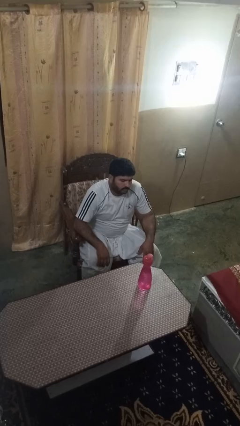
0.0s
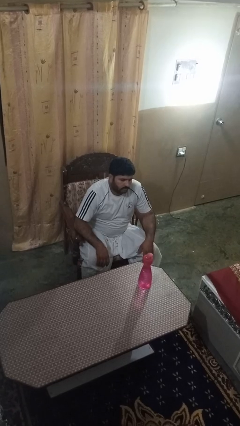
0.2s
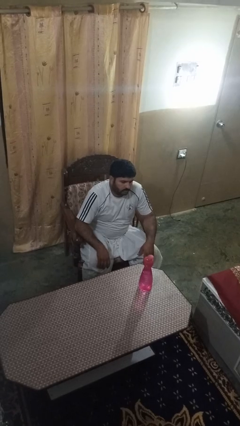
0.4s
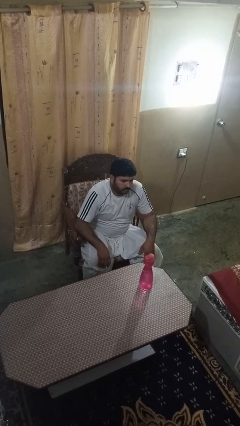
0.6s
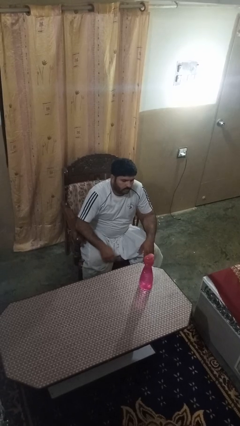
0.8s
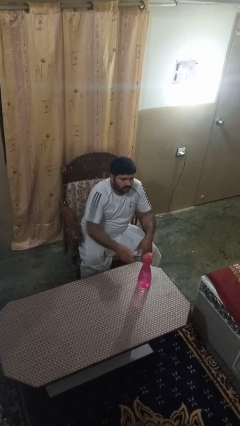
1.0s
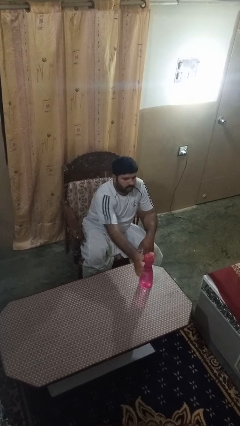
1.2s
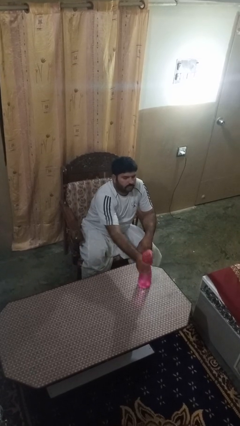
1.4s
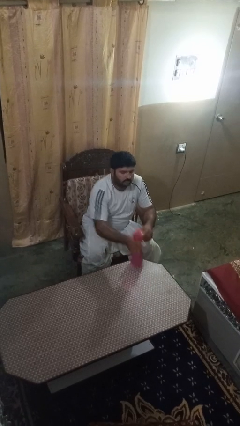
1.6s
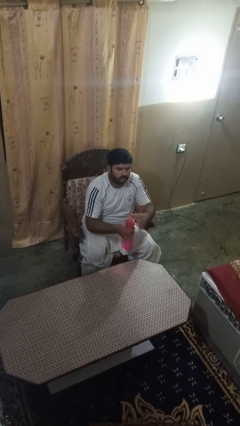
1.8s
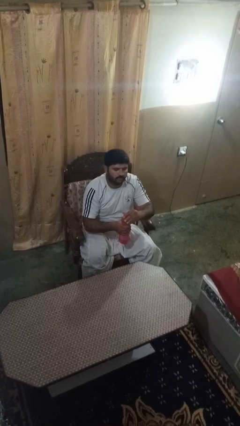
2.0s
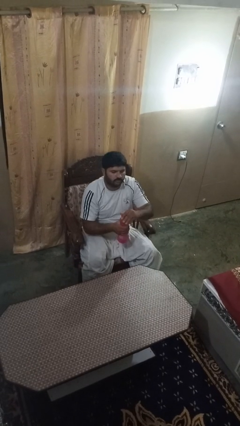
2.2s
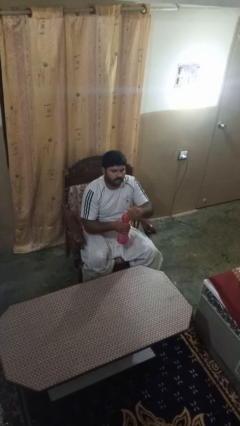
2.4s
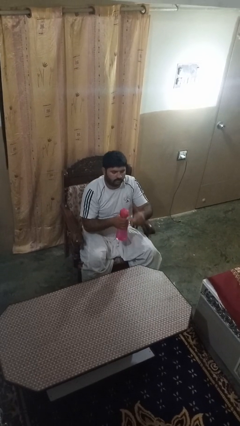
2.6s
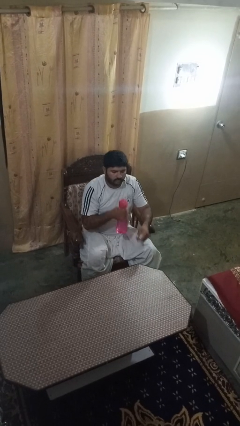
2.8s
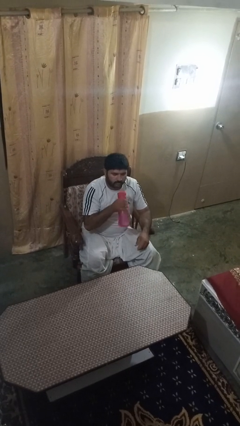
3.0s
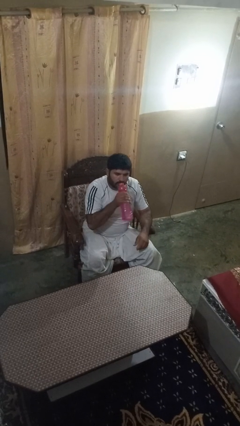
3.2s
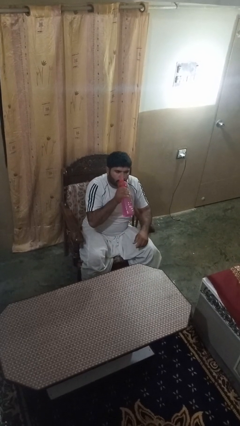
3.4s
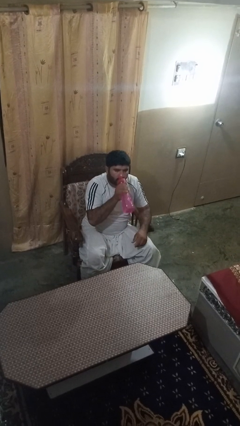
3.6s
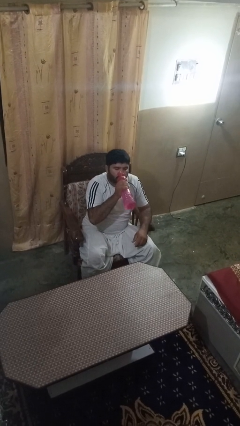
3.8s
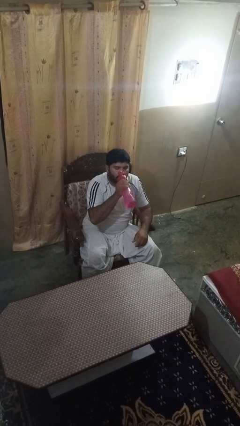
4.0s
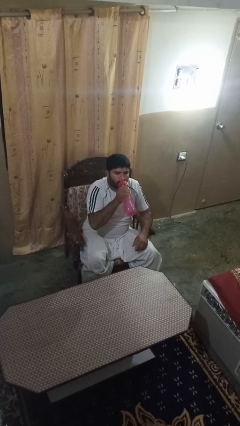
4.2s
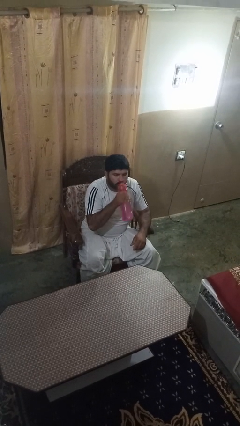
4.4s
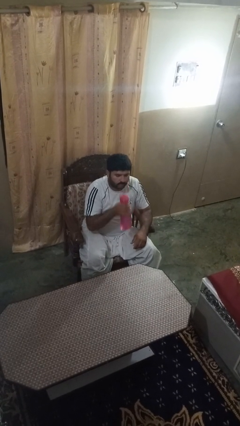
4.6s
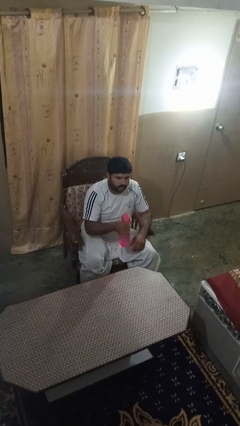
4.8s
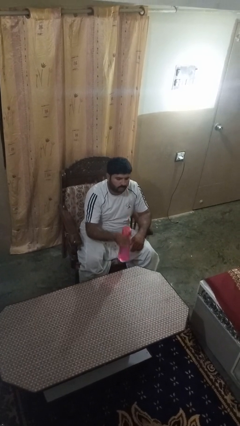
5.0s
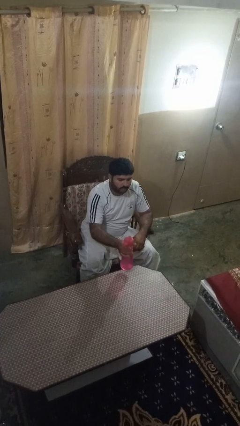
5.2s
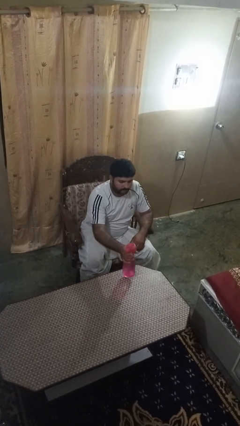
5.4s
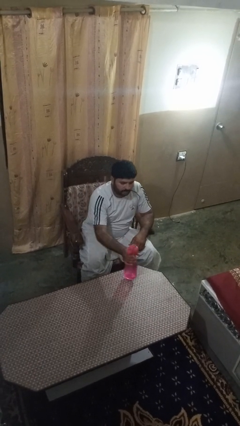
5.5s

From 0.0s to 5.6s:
person drinks from bottle

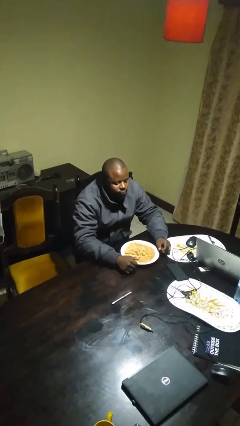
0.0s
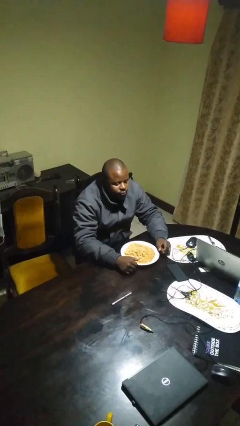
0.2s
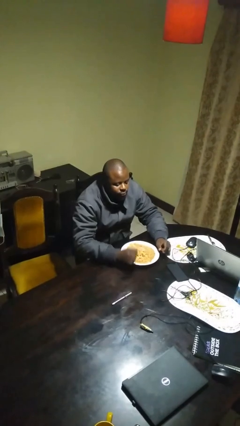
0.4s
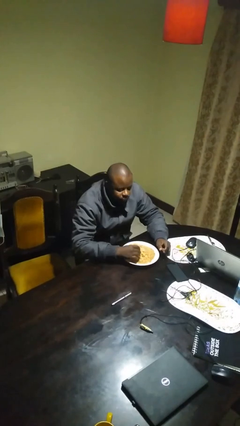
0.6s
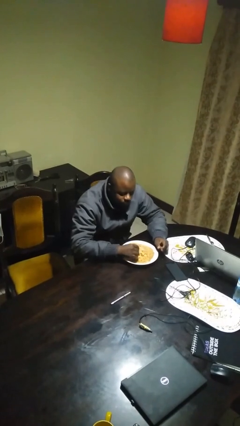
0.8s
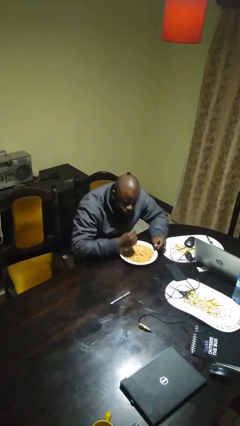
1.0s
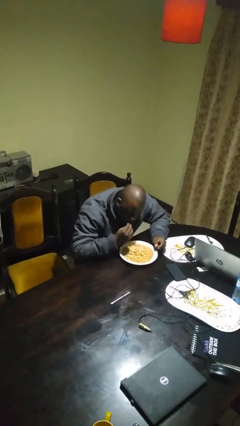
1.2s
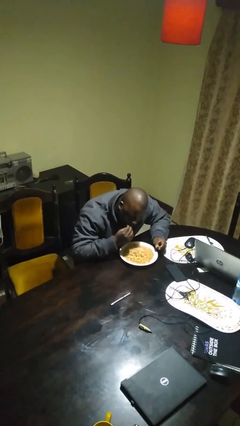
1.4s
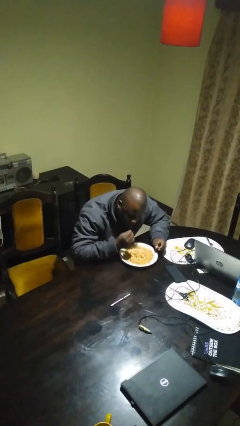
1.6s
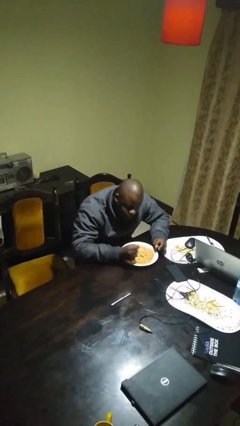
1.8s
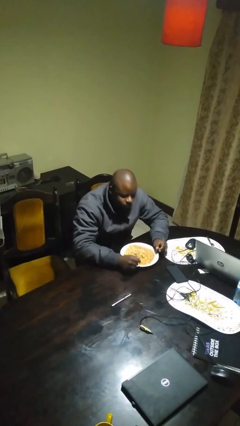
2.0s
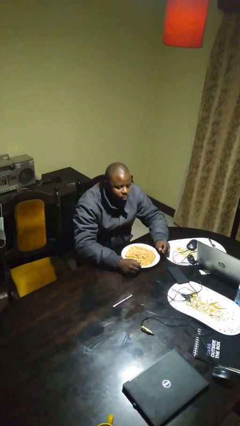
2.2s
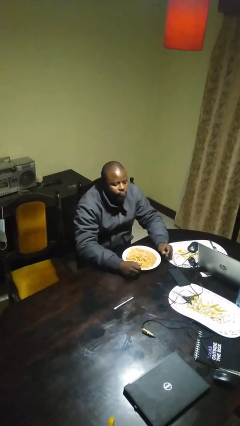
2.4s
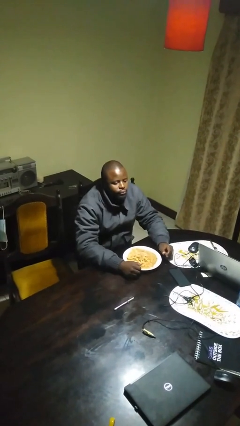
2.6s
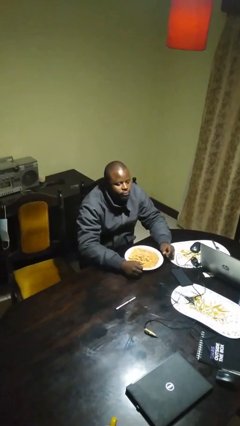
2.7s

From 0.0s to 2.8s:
person eats with hands

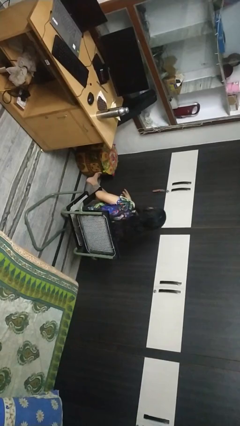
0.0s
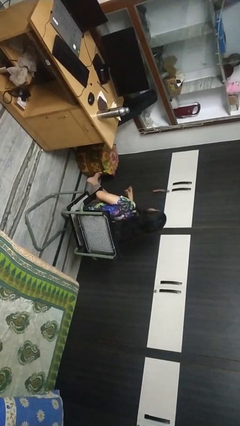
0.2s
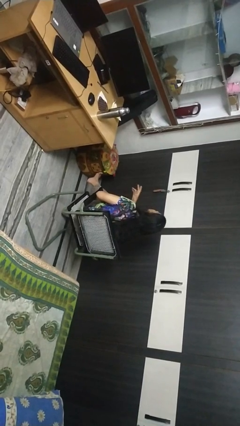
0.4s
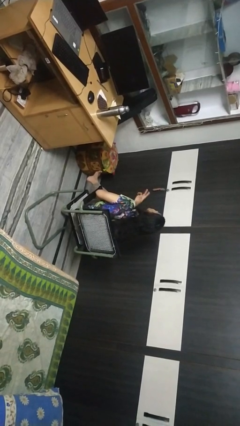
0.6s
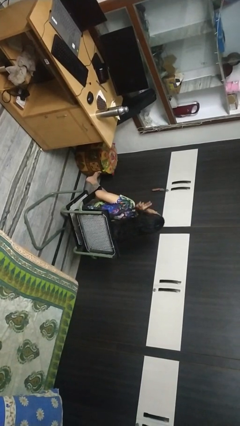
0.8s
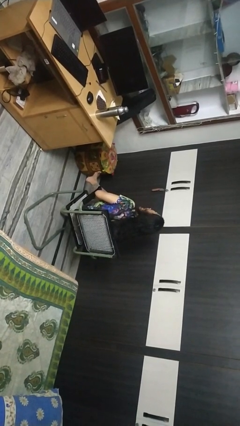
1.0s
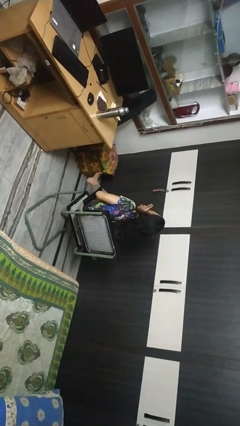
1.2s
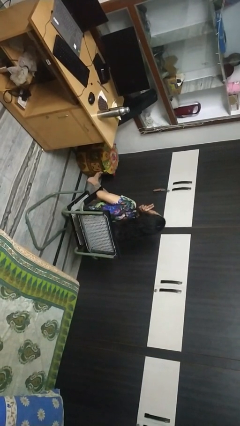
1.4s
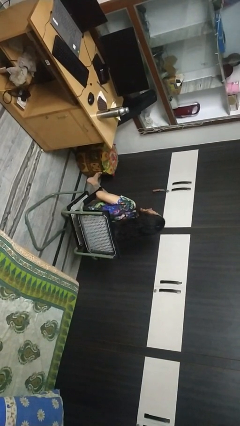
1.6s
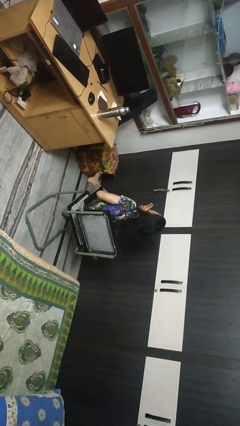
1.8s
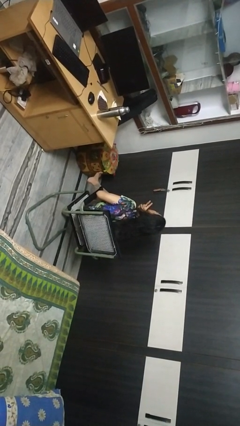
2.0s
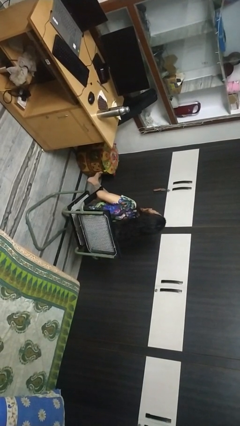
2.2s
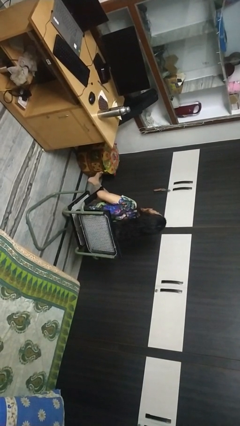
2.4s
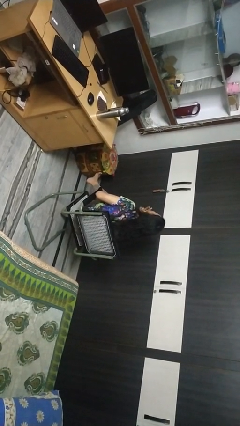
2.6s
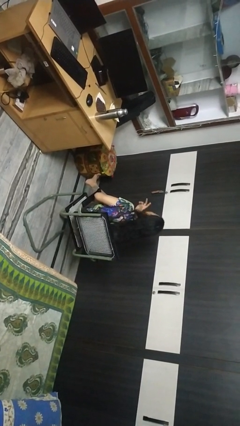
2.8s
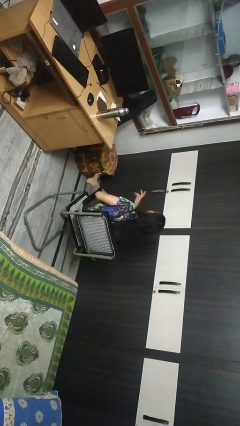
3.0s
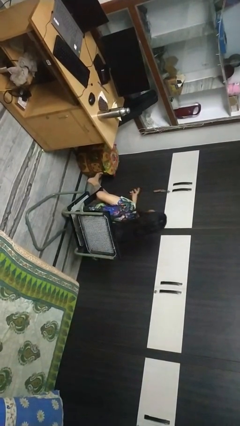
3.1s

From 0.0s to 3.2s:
person strokes chin

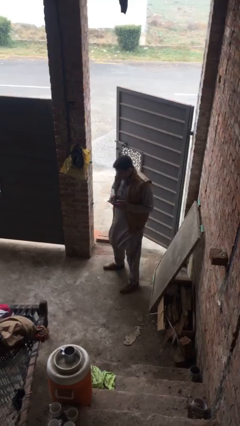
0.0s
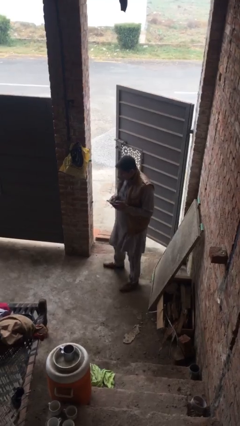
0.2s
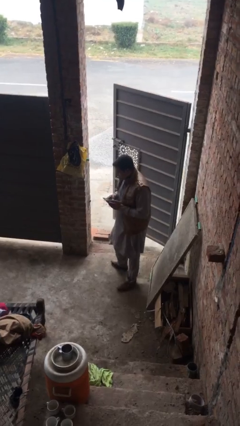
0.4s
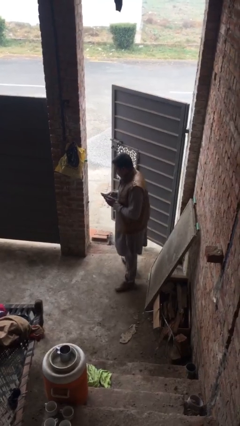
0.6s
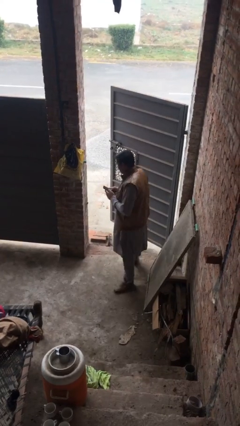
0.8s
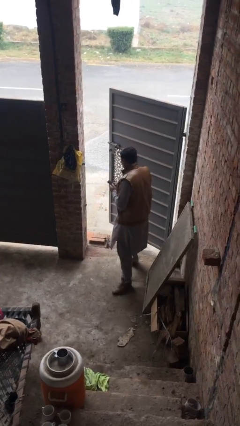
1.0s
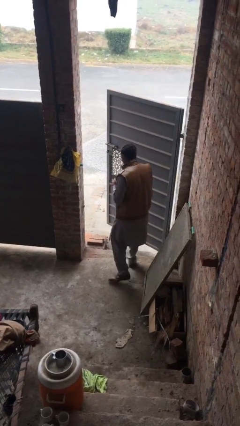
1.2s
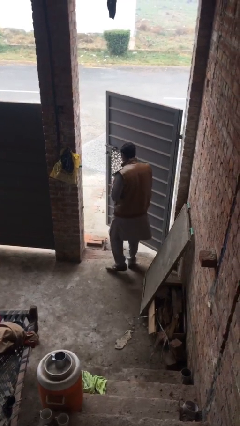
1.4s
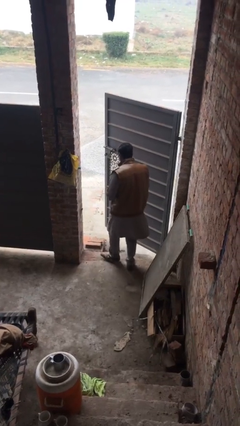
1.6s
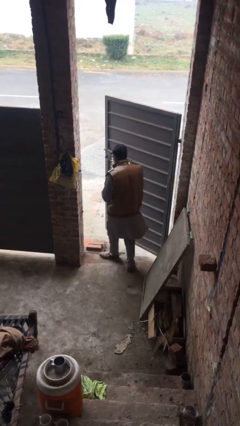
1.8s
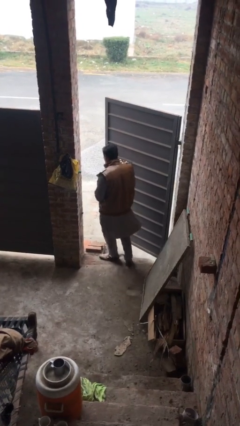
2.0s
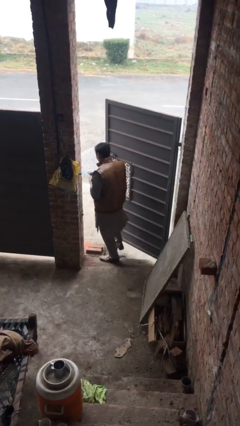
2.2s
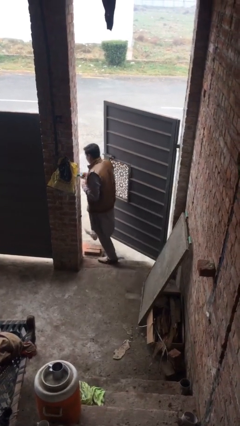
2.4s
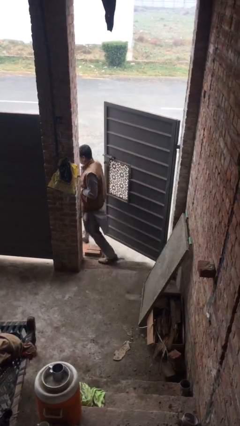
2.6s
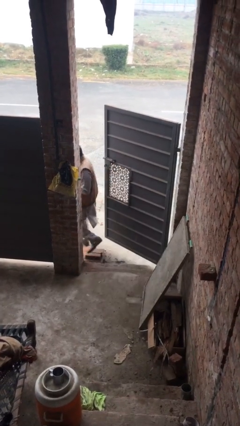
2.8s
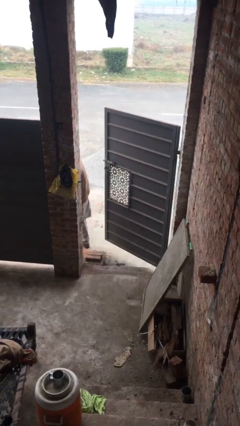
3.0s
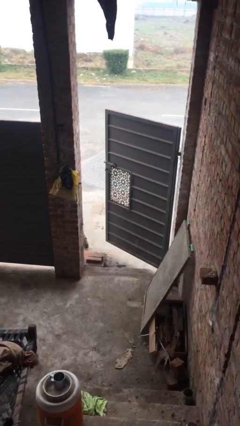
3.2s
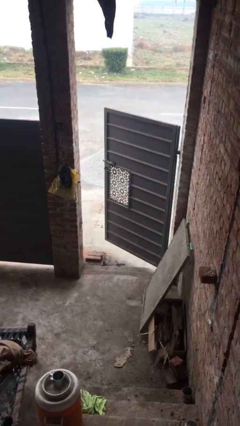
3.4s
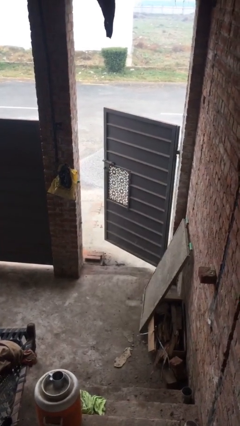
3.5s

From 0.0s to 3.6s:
person exits scene through structure

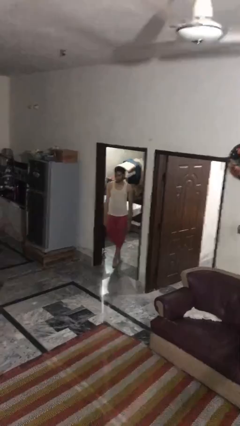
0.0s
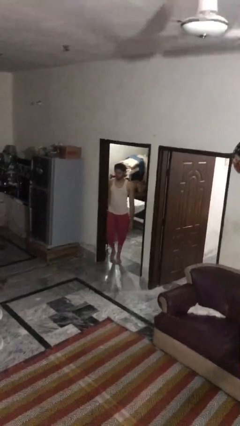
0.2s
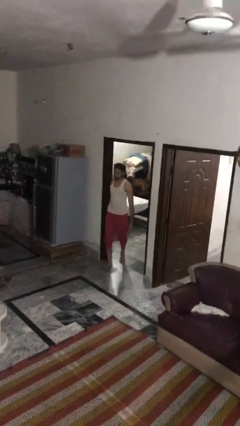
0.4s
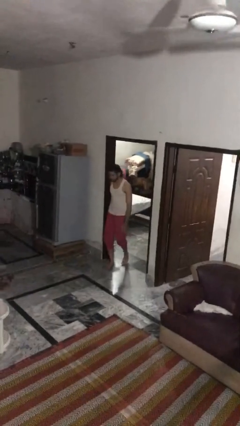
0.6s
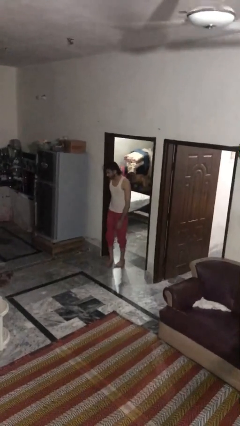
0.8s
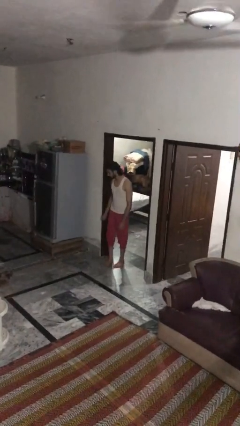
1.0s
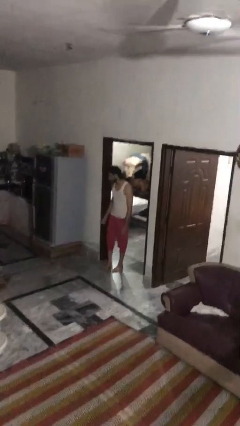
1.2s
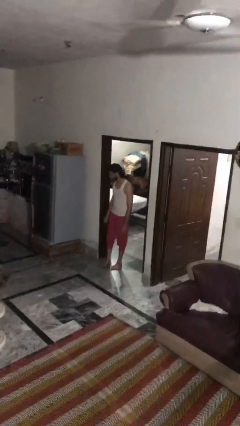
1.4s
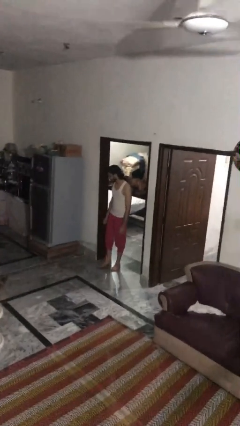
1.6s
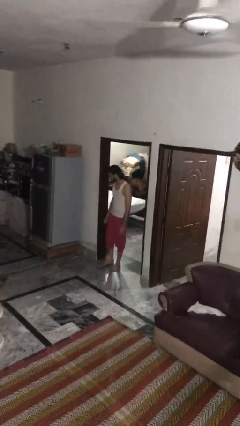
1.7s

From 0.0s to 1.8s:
person bumps into wall

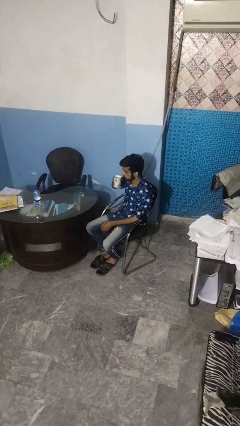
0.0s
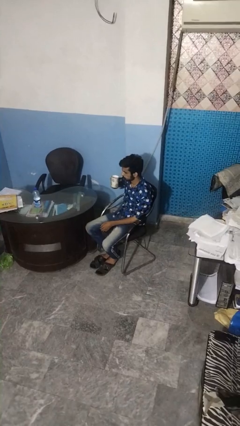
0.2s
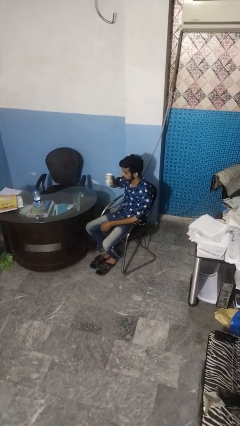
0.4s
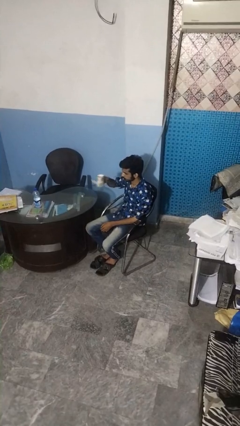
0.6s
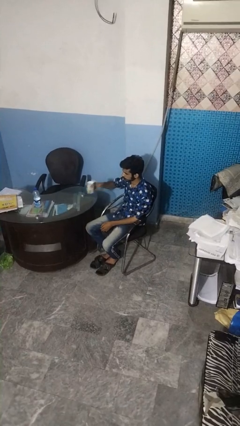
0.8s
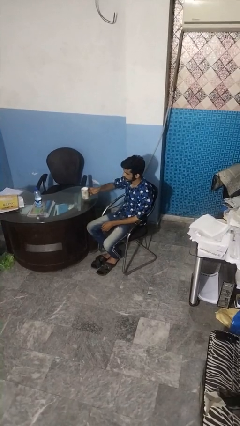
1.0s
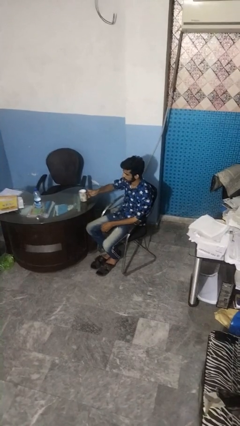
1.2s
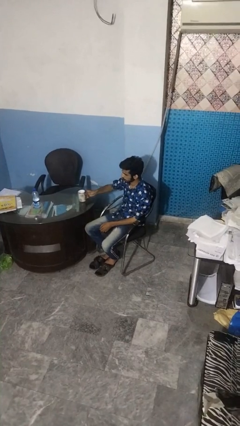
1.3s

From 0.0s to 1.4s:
person puts down object on table
